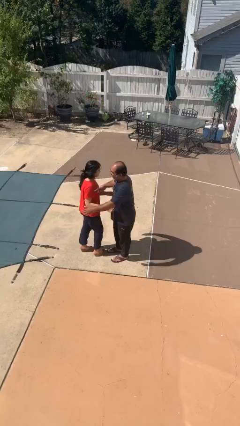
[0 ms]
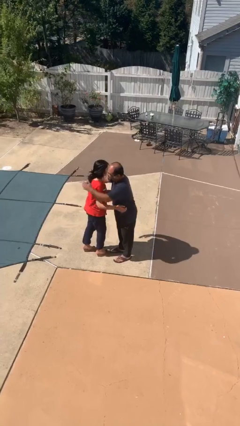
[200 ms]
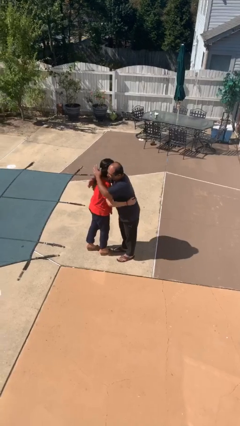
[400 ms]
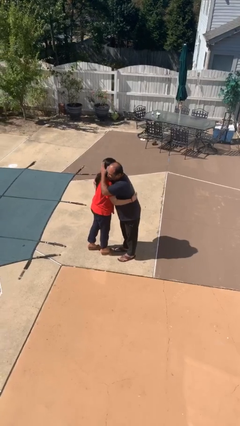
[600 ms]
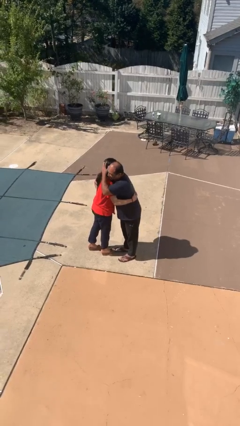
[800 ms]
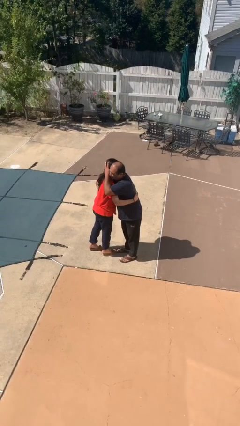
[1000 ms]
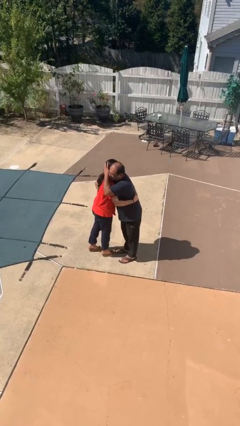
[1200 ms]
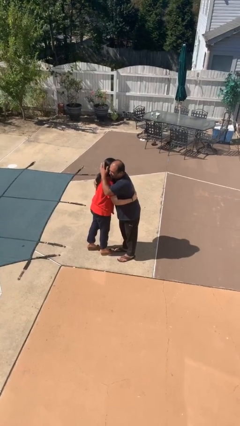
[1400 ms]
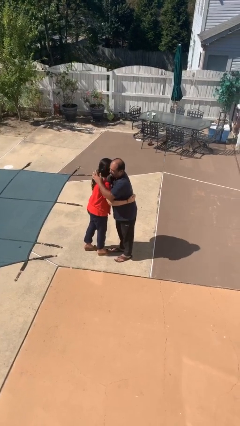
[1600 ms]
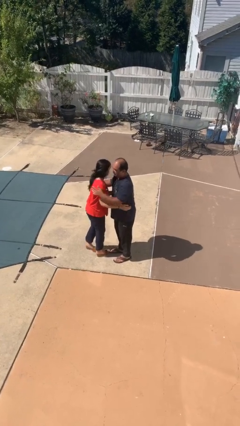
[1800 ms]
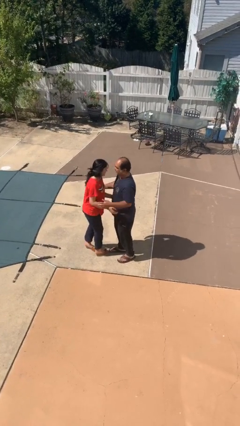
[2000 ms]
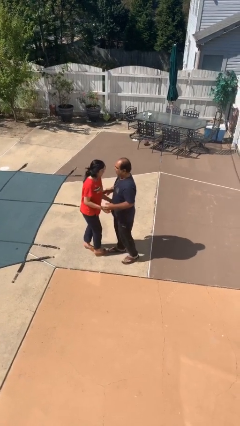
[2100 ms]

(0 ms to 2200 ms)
person embraces person

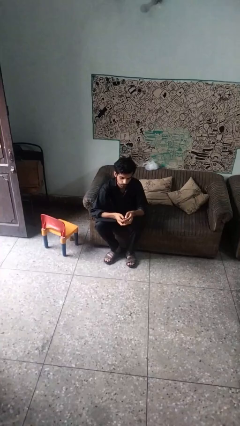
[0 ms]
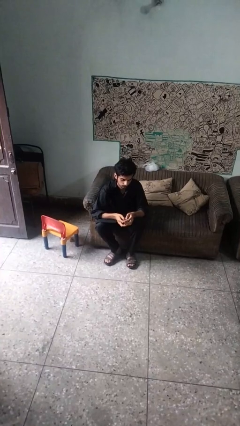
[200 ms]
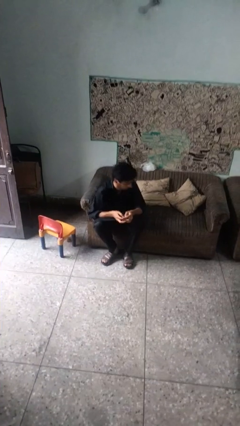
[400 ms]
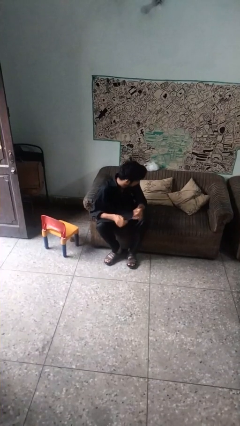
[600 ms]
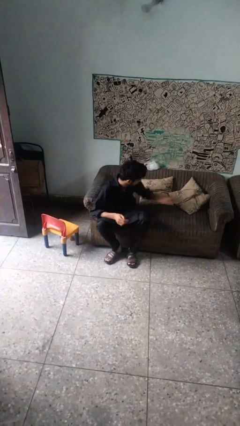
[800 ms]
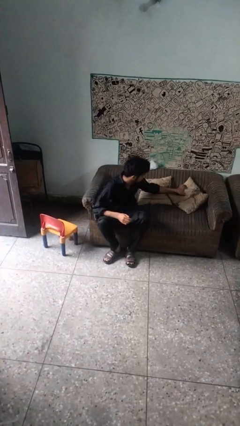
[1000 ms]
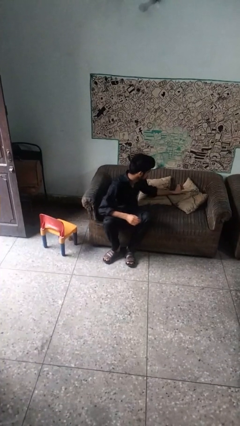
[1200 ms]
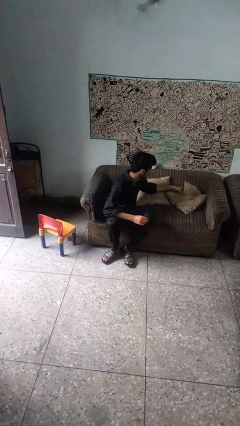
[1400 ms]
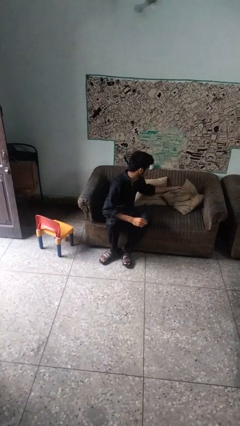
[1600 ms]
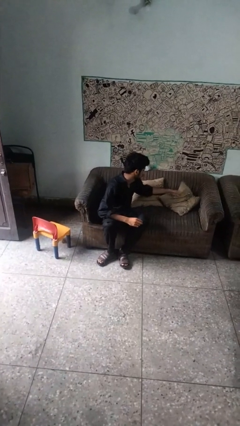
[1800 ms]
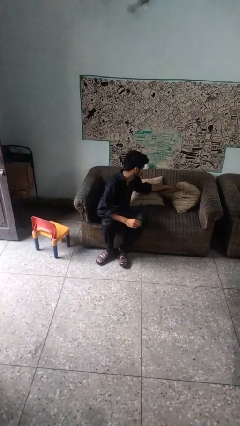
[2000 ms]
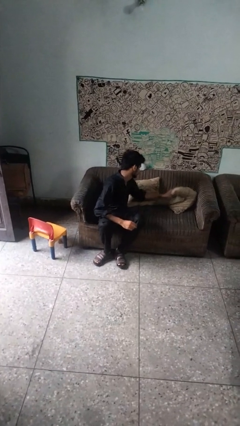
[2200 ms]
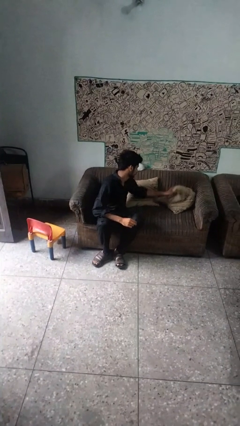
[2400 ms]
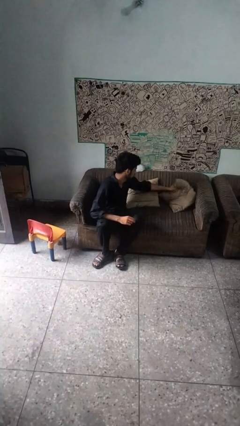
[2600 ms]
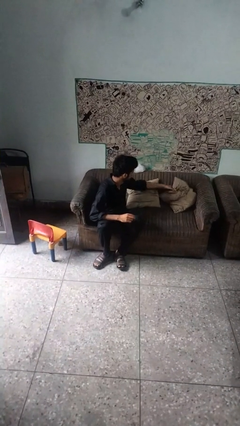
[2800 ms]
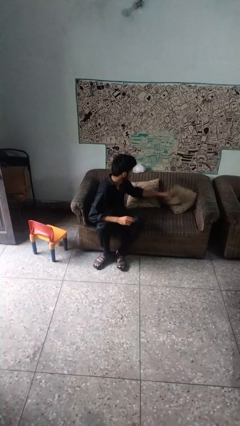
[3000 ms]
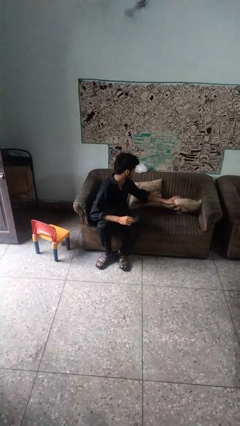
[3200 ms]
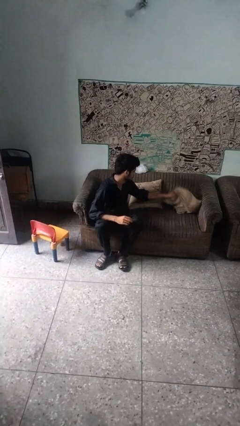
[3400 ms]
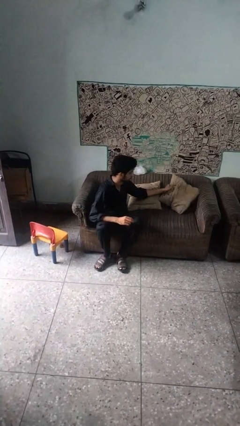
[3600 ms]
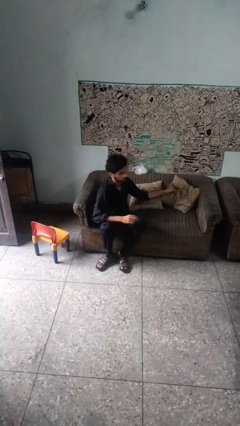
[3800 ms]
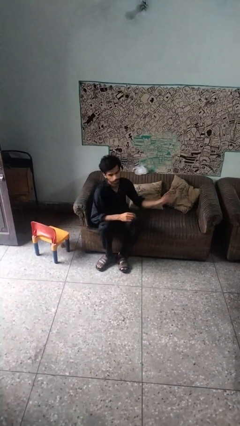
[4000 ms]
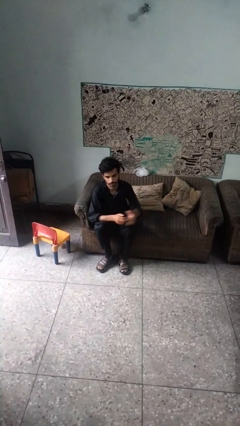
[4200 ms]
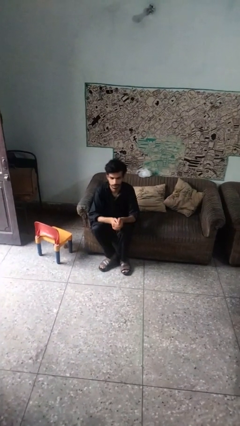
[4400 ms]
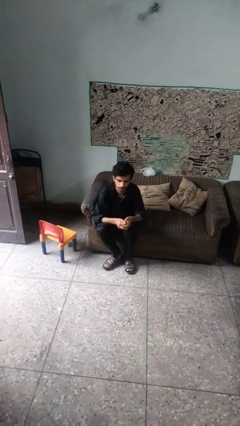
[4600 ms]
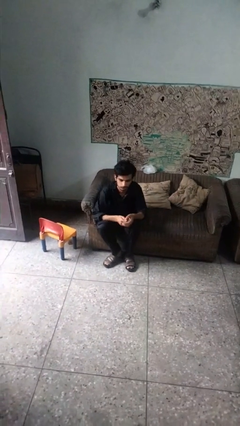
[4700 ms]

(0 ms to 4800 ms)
person searches in couch

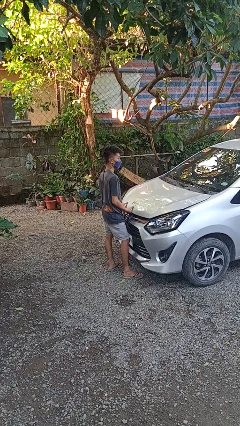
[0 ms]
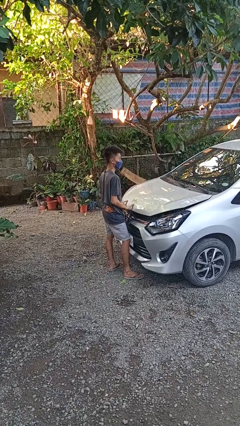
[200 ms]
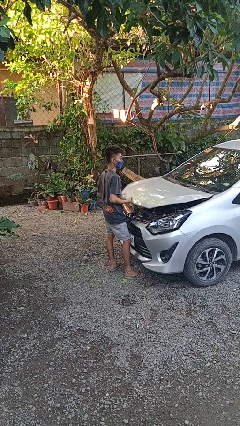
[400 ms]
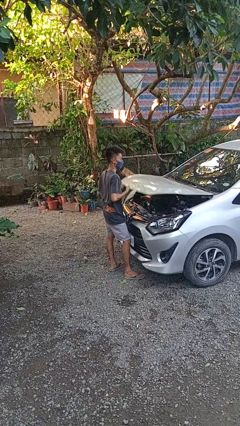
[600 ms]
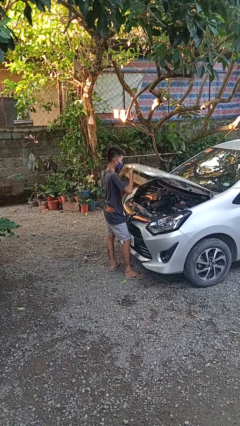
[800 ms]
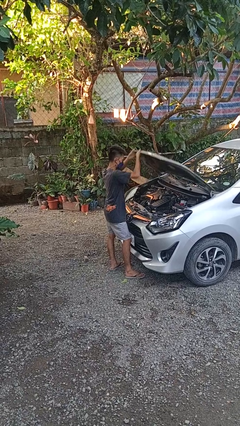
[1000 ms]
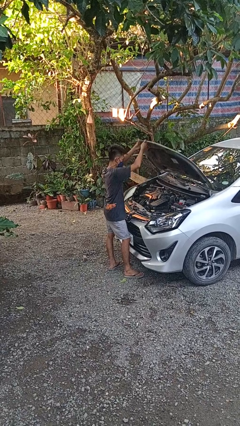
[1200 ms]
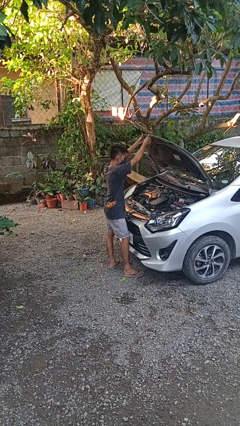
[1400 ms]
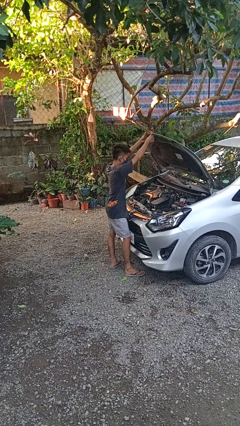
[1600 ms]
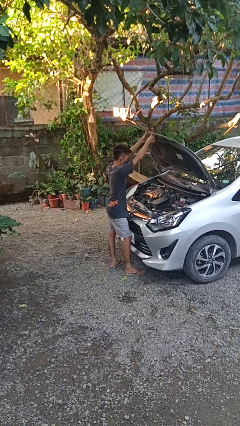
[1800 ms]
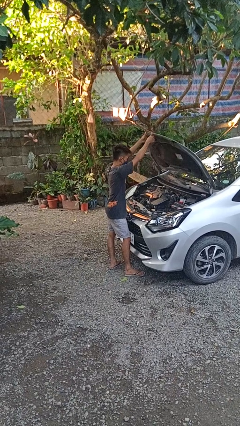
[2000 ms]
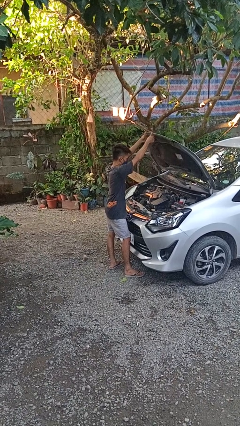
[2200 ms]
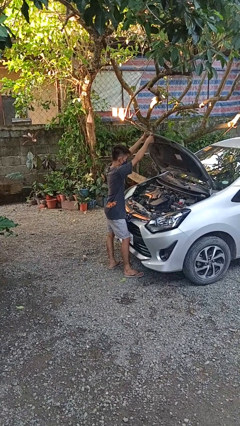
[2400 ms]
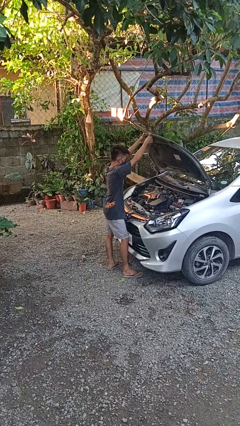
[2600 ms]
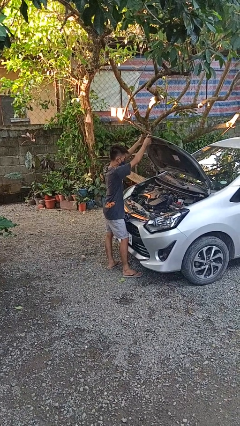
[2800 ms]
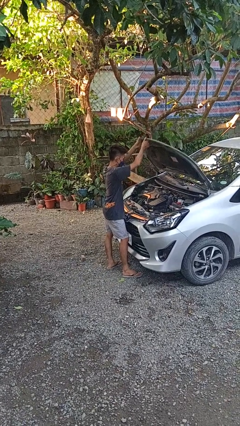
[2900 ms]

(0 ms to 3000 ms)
person opens car hood

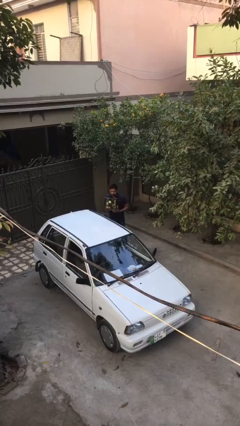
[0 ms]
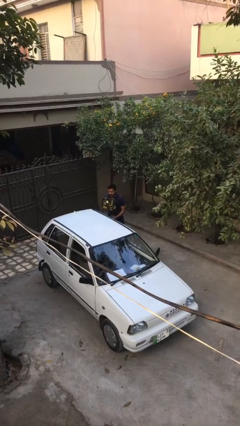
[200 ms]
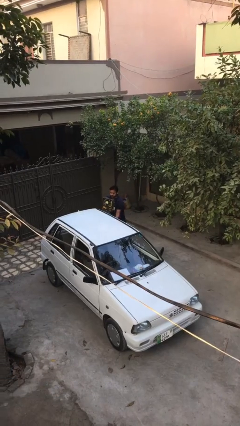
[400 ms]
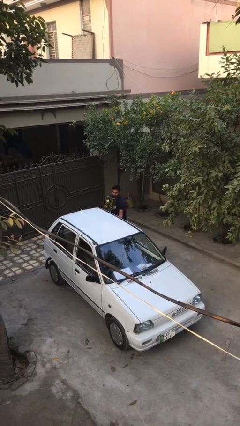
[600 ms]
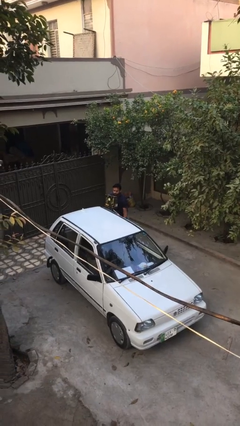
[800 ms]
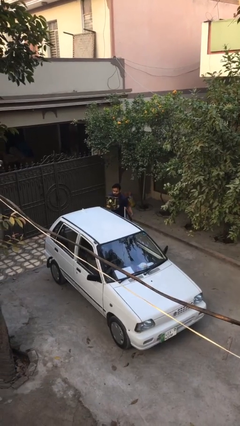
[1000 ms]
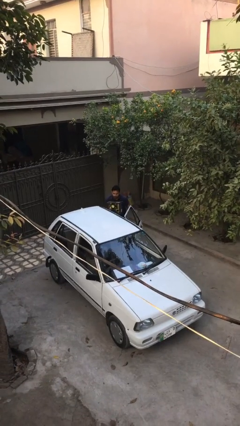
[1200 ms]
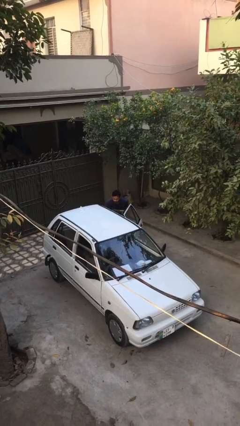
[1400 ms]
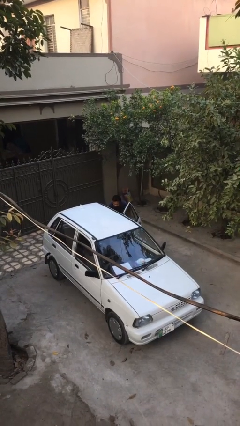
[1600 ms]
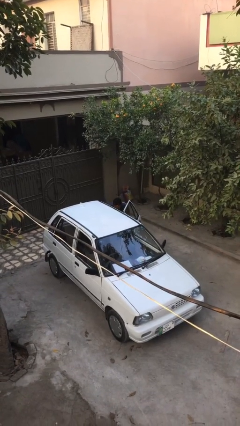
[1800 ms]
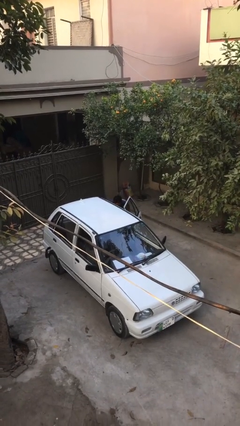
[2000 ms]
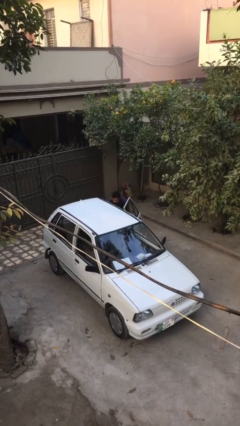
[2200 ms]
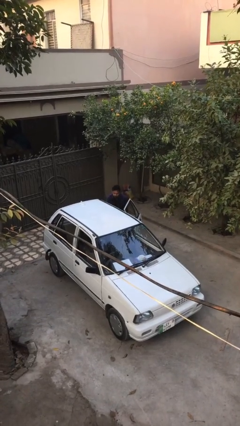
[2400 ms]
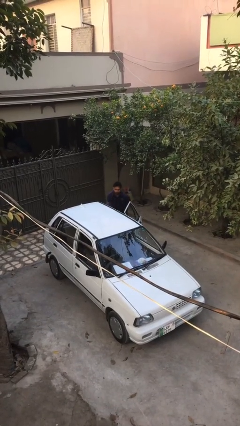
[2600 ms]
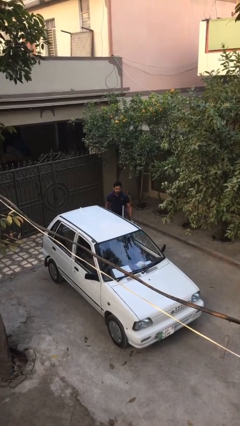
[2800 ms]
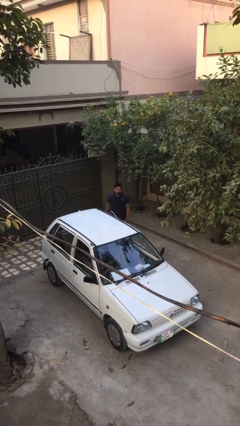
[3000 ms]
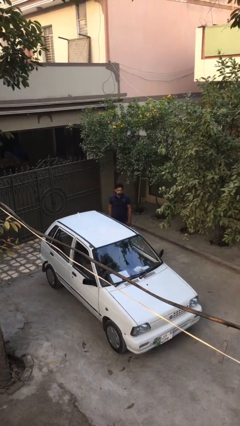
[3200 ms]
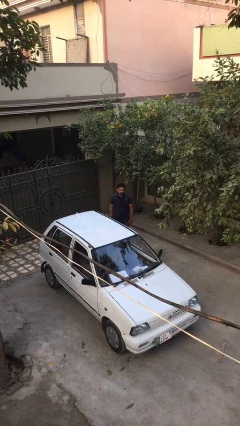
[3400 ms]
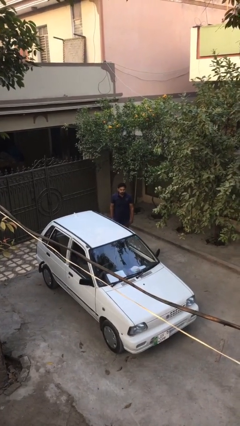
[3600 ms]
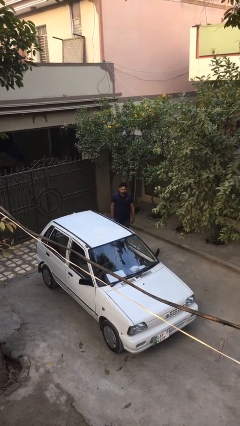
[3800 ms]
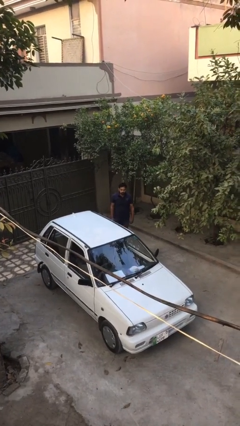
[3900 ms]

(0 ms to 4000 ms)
person loads car

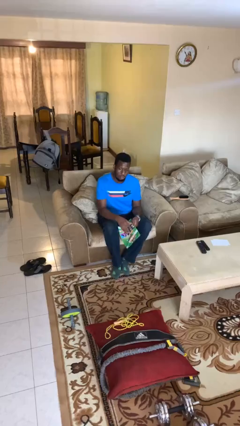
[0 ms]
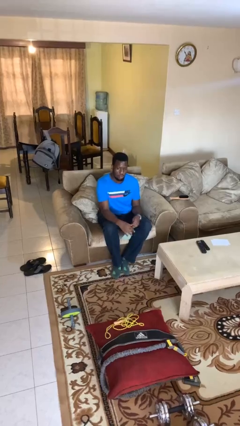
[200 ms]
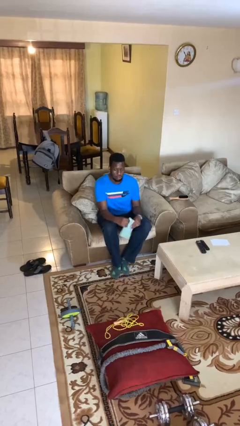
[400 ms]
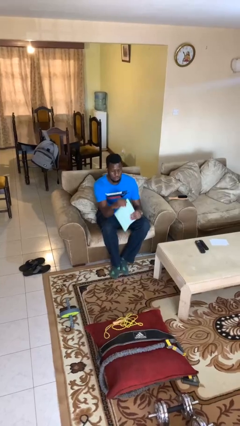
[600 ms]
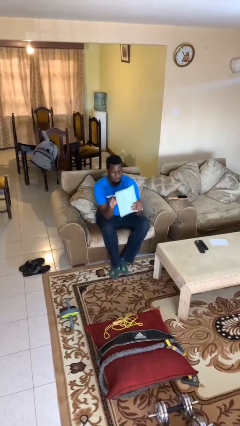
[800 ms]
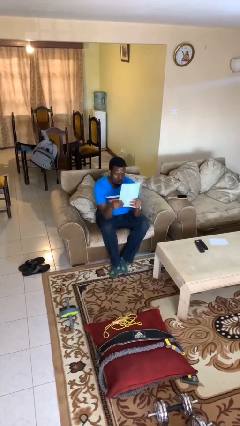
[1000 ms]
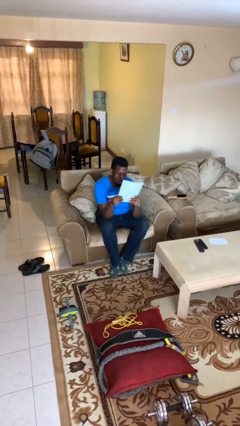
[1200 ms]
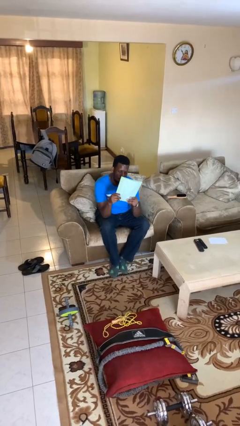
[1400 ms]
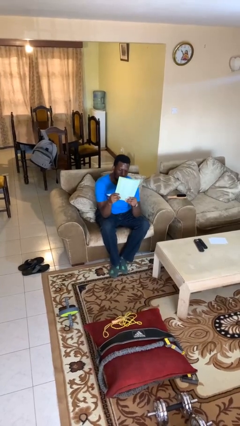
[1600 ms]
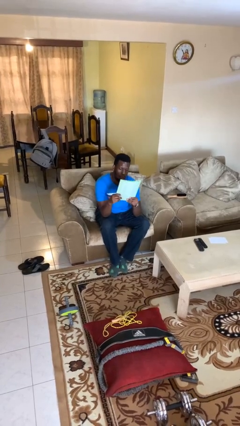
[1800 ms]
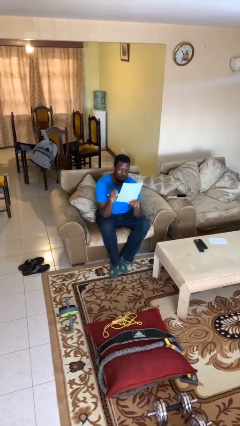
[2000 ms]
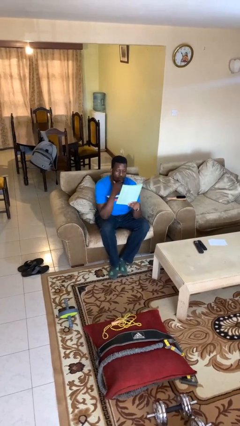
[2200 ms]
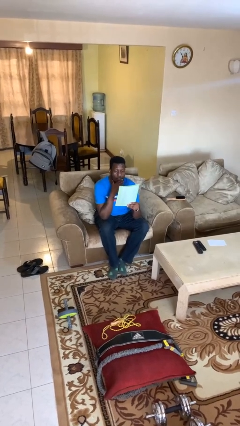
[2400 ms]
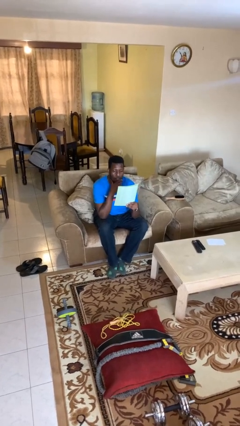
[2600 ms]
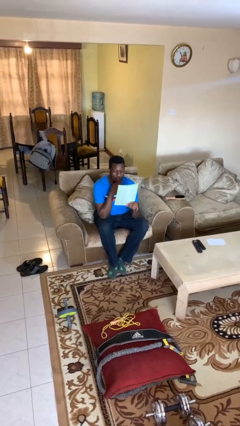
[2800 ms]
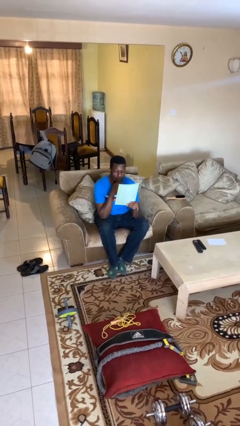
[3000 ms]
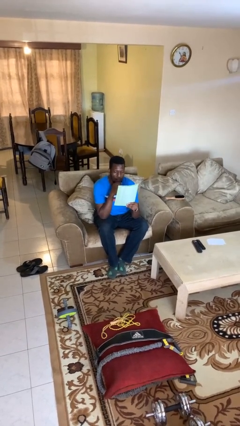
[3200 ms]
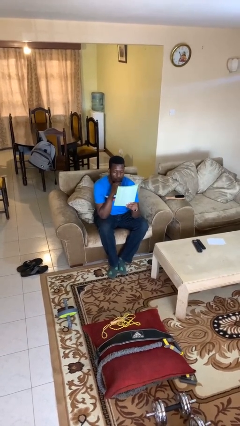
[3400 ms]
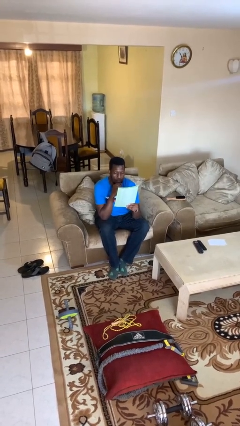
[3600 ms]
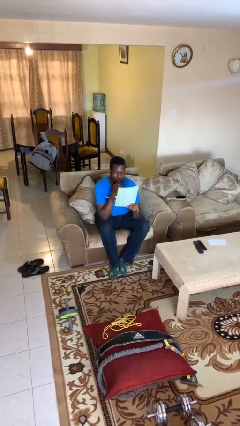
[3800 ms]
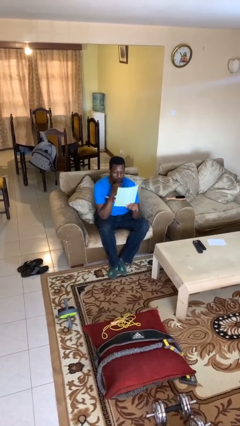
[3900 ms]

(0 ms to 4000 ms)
person reads document
